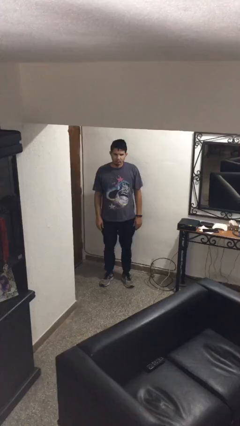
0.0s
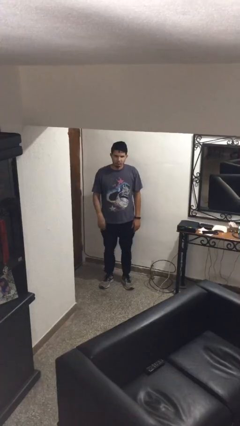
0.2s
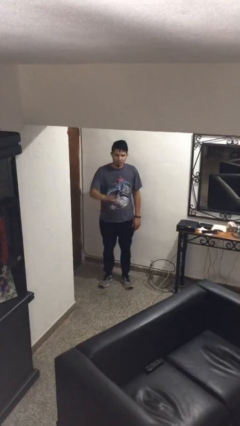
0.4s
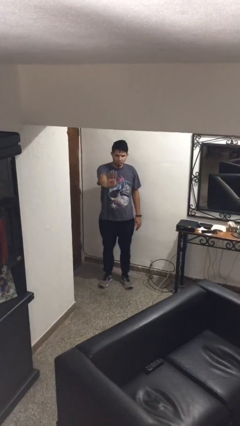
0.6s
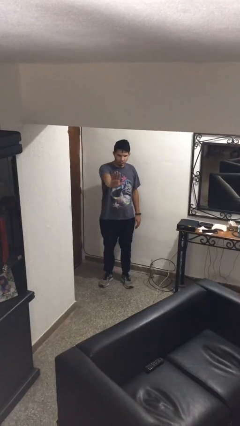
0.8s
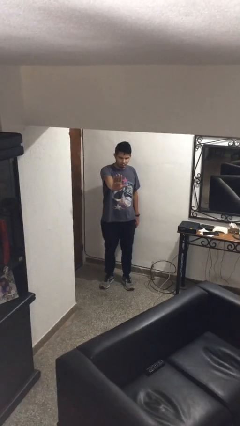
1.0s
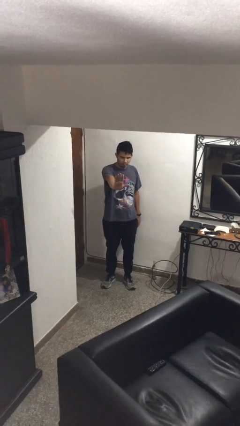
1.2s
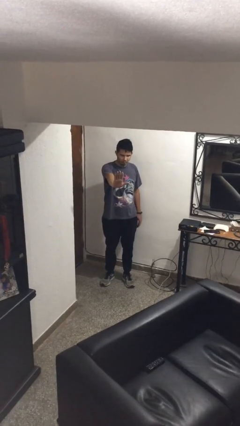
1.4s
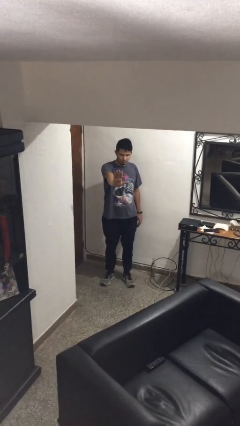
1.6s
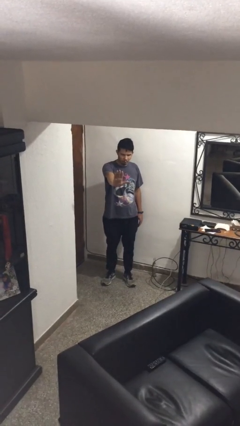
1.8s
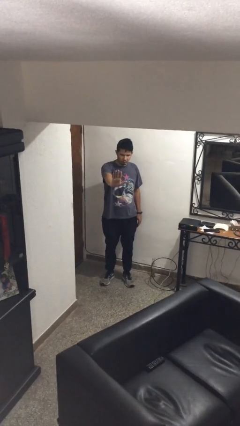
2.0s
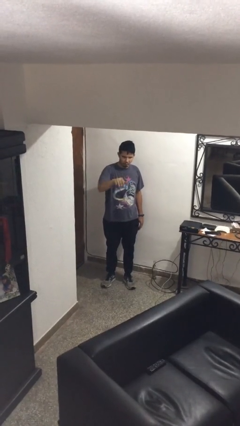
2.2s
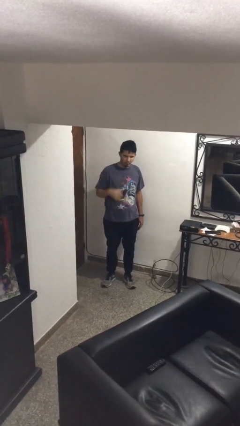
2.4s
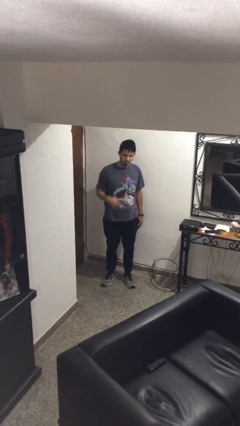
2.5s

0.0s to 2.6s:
person gestures stop

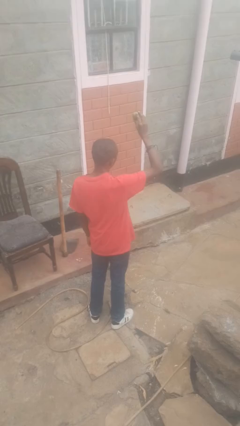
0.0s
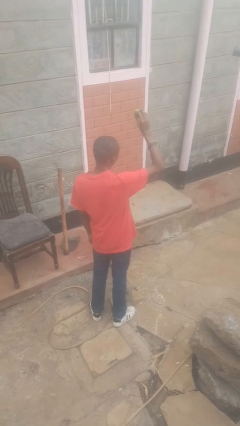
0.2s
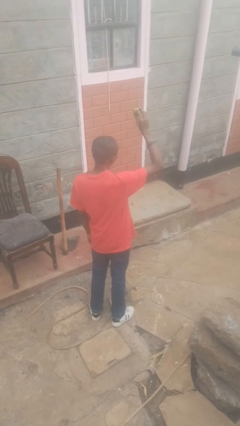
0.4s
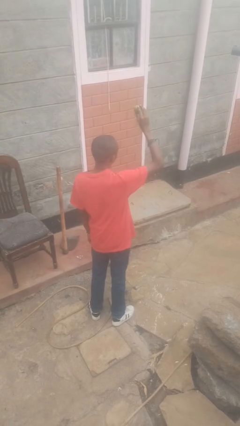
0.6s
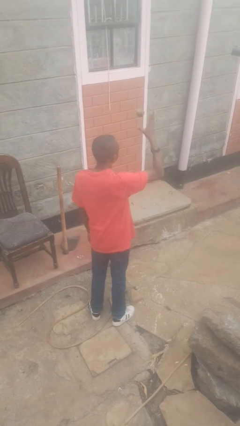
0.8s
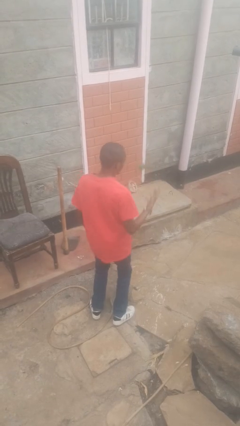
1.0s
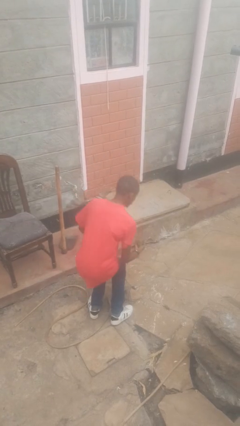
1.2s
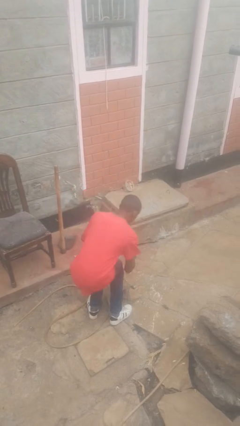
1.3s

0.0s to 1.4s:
person drops object

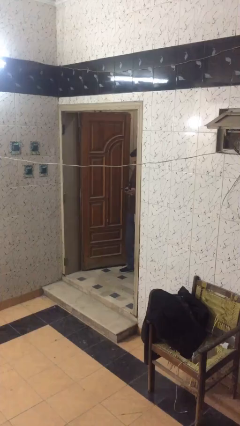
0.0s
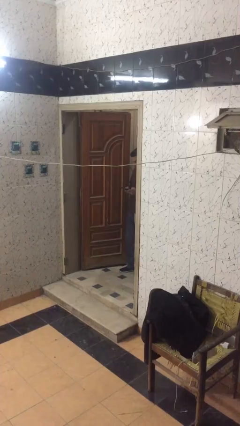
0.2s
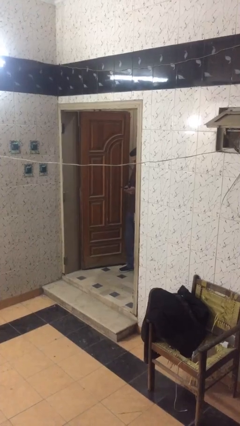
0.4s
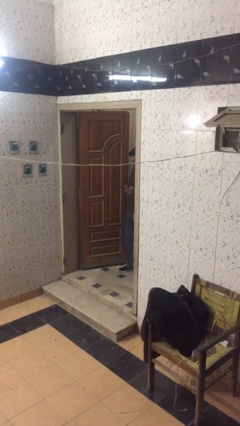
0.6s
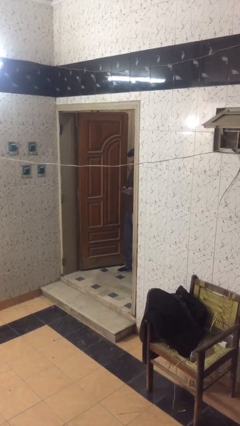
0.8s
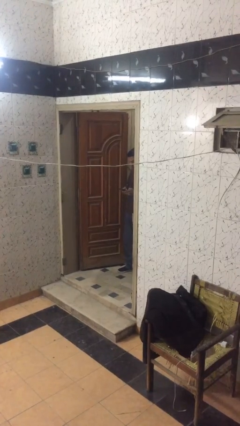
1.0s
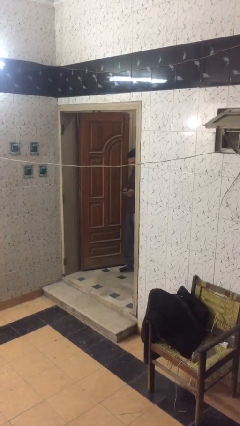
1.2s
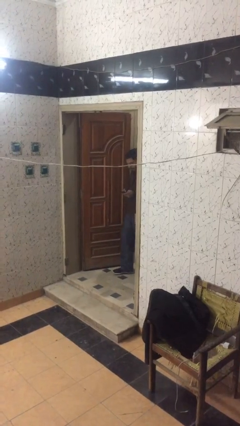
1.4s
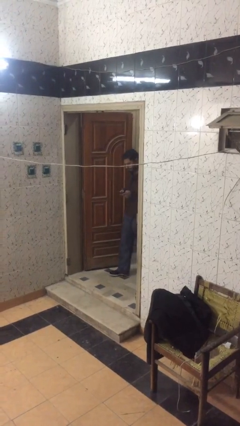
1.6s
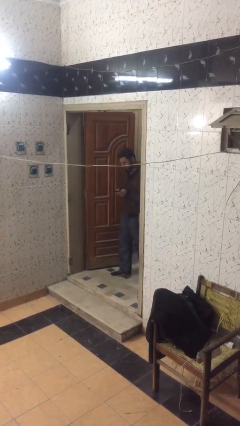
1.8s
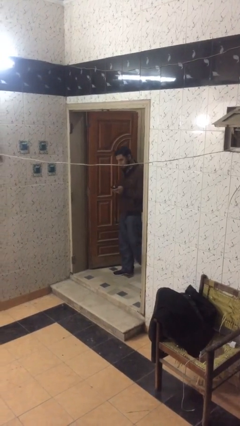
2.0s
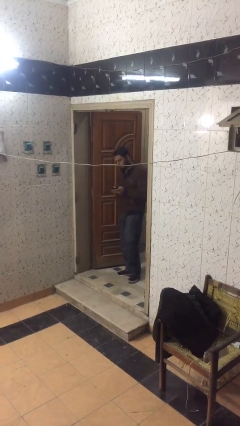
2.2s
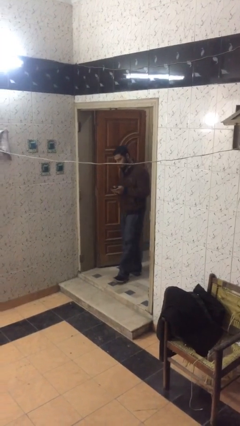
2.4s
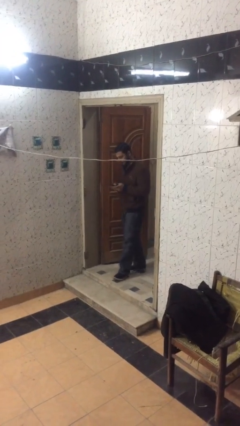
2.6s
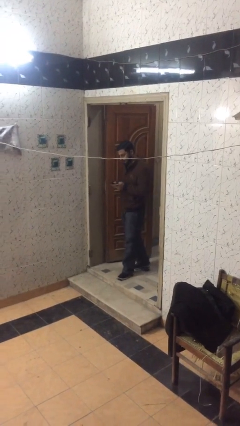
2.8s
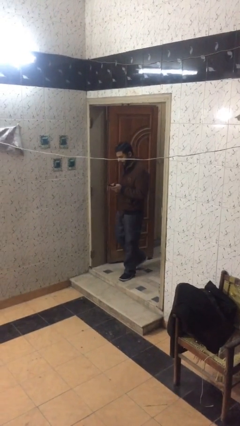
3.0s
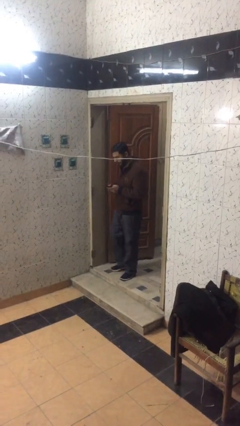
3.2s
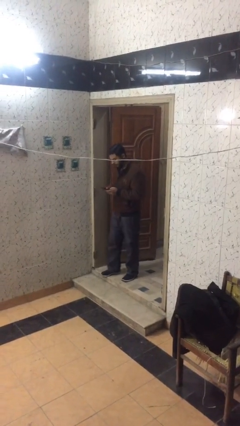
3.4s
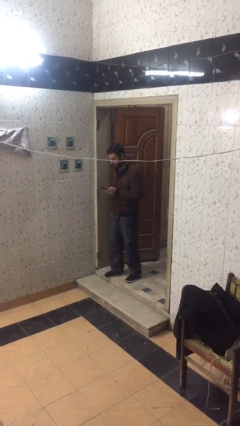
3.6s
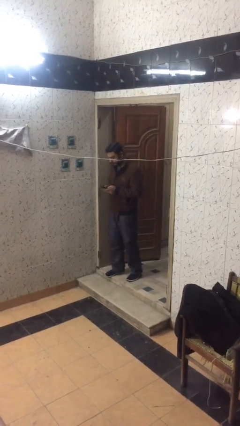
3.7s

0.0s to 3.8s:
person enters scene through structure

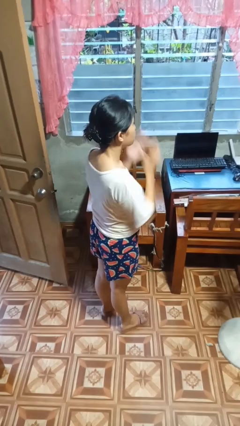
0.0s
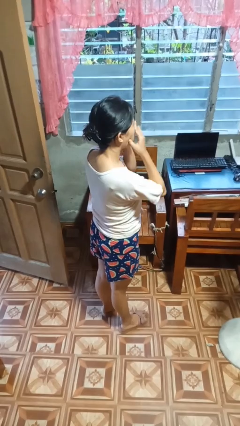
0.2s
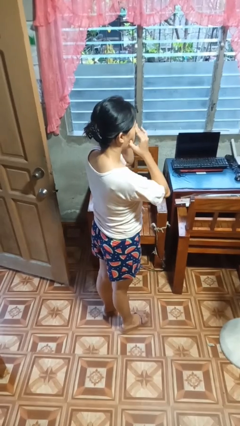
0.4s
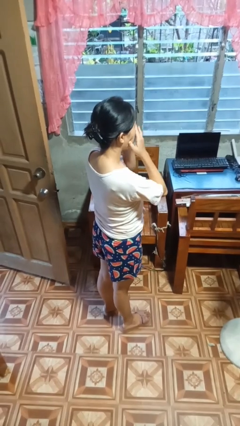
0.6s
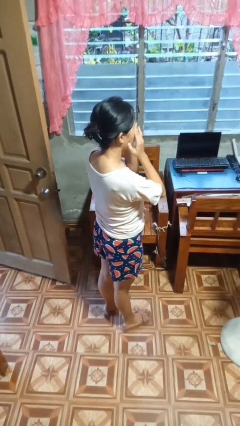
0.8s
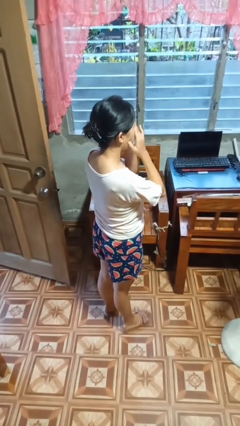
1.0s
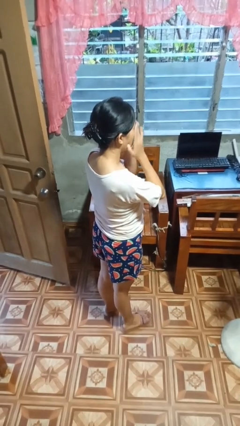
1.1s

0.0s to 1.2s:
person rubs eyes

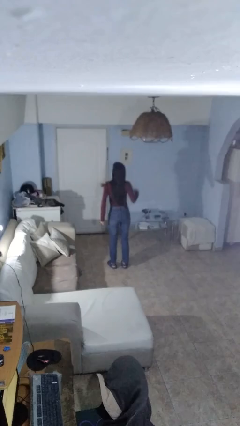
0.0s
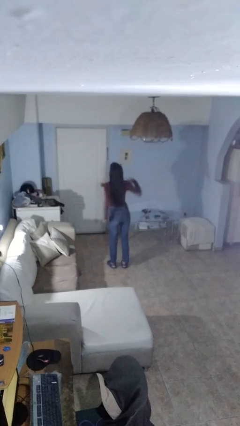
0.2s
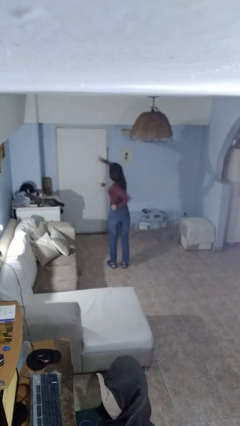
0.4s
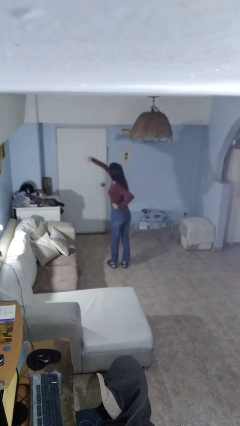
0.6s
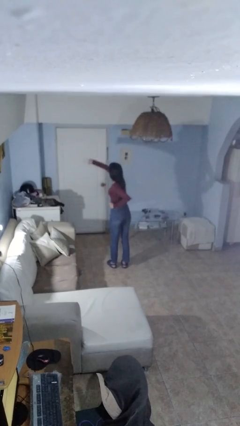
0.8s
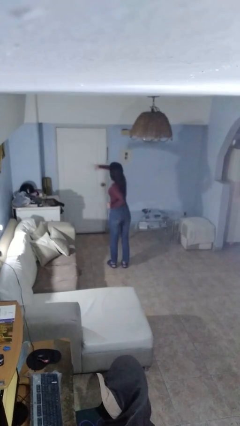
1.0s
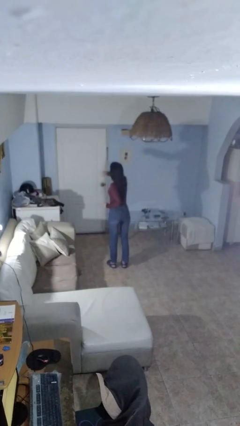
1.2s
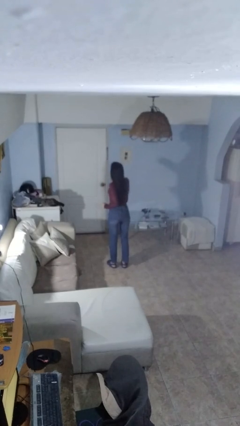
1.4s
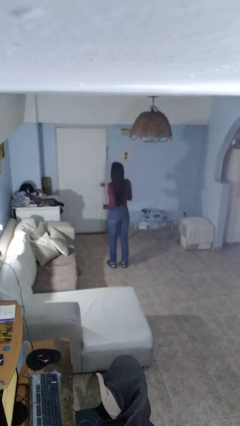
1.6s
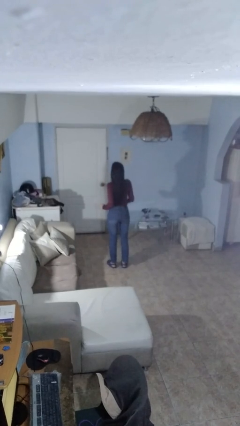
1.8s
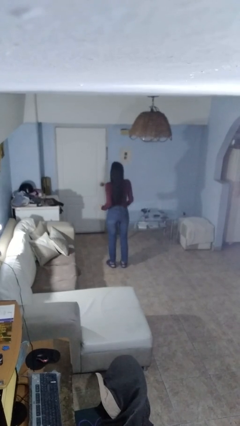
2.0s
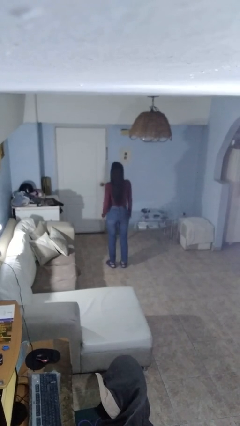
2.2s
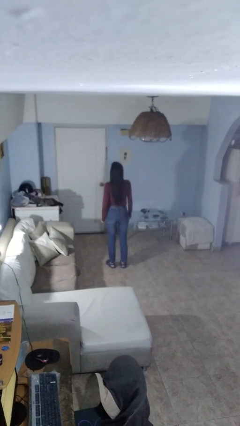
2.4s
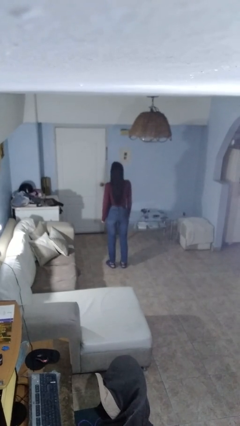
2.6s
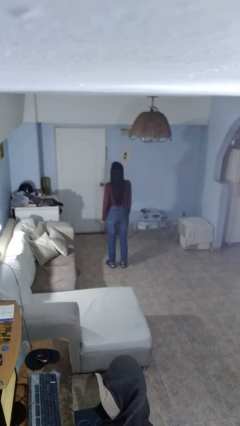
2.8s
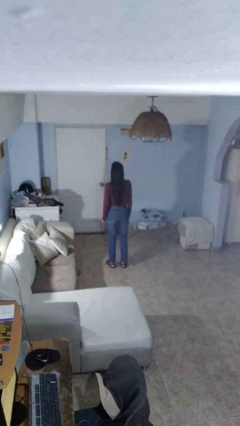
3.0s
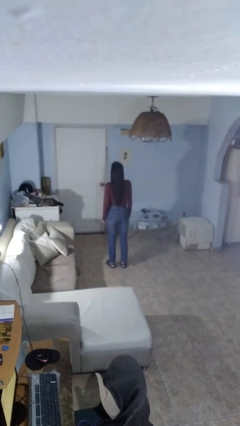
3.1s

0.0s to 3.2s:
person punches

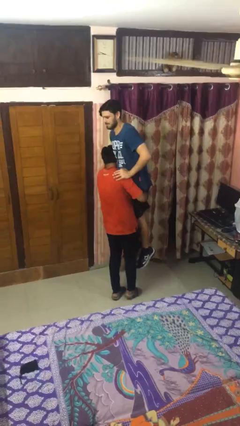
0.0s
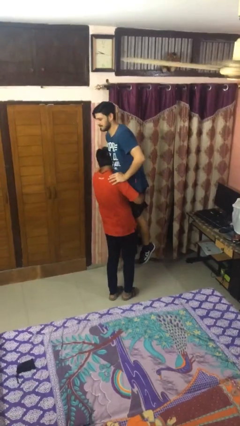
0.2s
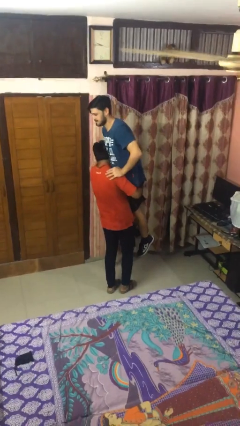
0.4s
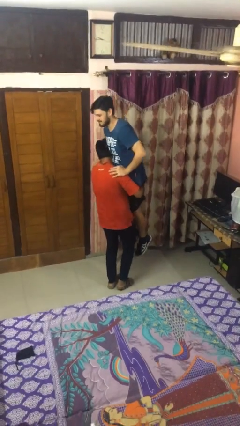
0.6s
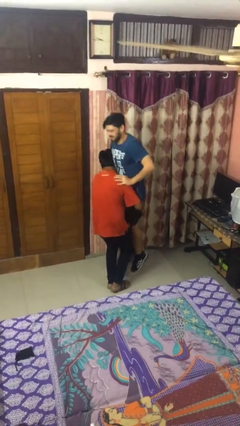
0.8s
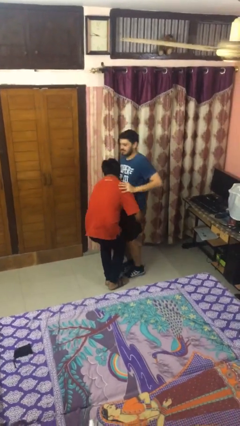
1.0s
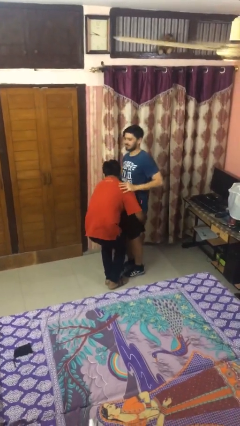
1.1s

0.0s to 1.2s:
person puts down person

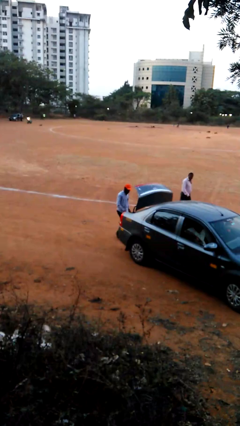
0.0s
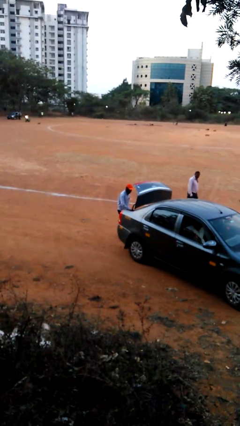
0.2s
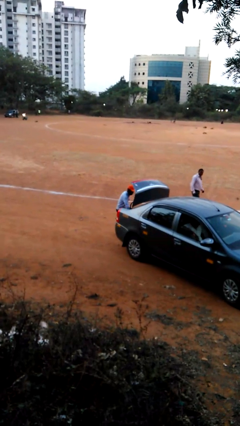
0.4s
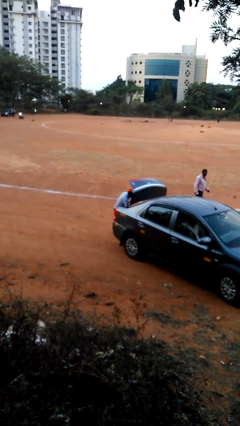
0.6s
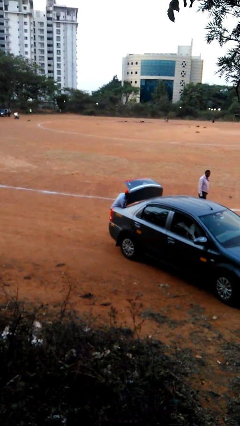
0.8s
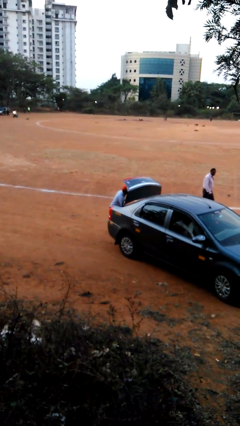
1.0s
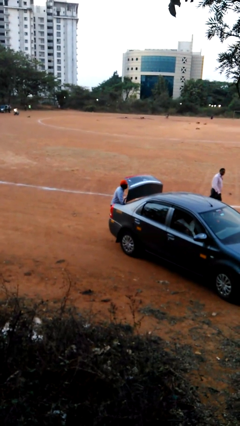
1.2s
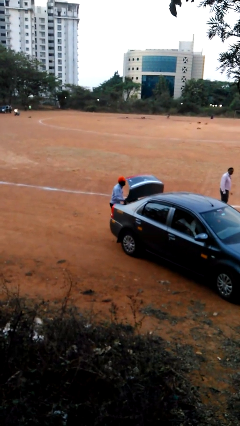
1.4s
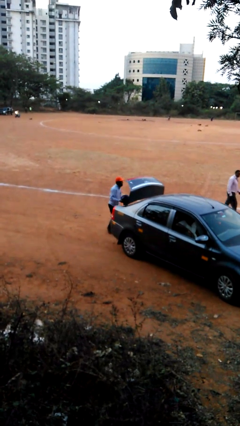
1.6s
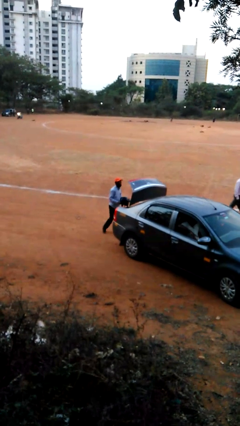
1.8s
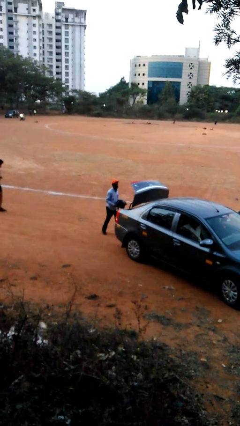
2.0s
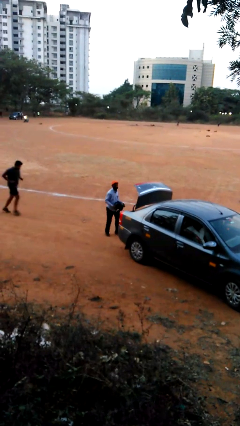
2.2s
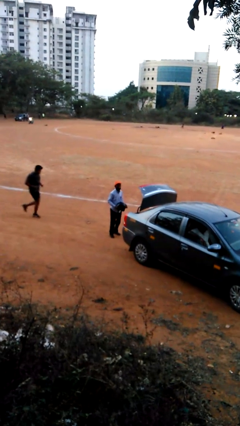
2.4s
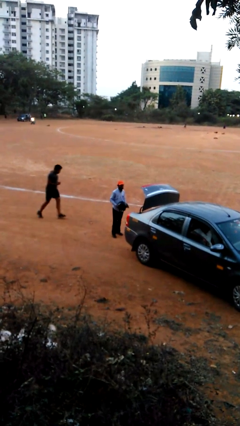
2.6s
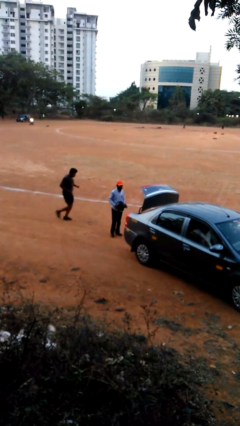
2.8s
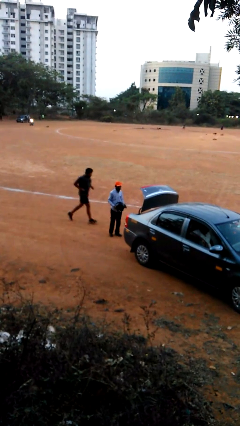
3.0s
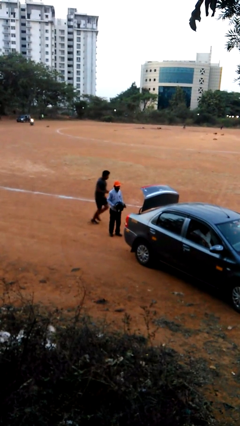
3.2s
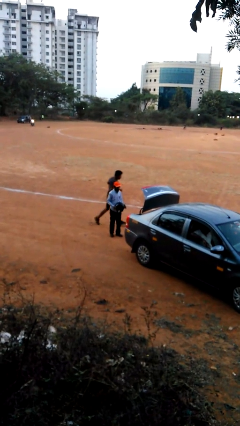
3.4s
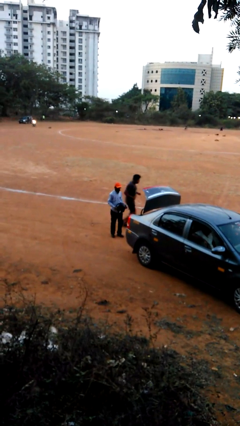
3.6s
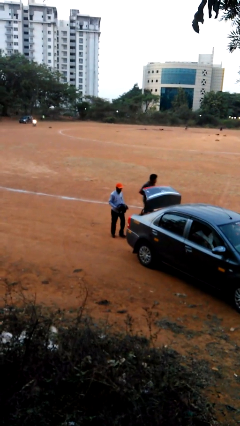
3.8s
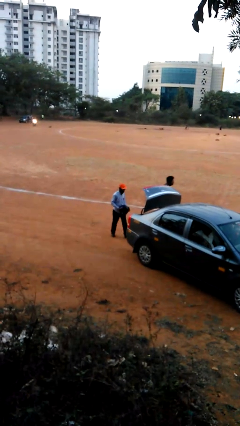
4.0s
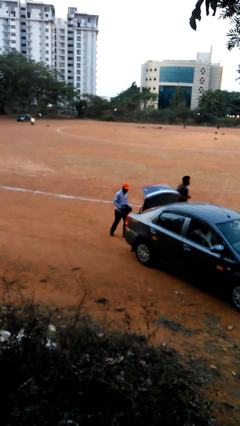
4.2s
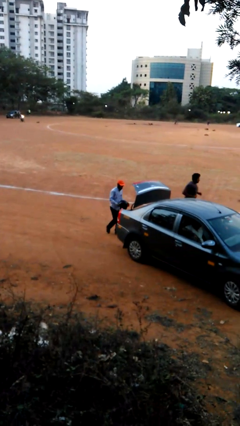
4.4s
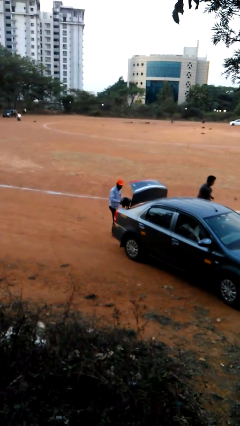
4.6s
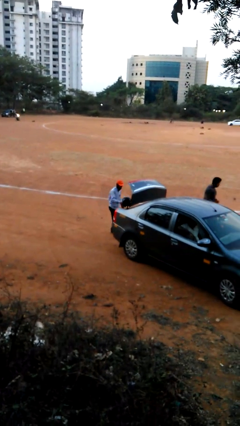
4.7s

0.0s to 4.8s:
person unloads car
